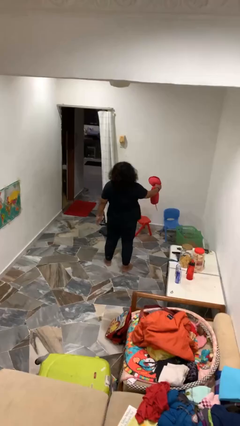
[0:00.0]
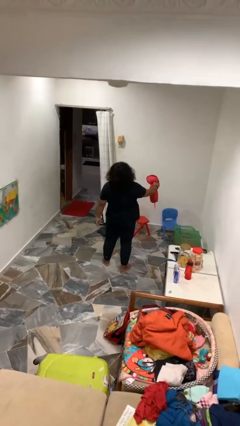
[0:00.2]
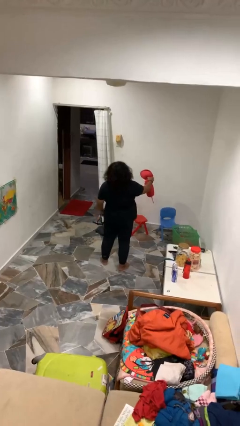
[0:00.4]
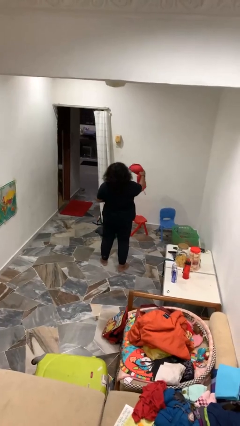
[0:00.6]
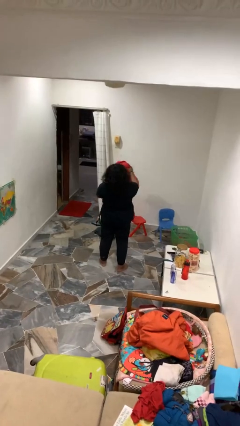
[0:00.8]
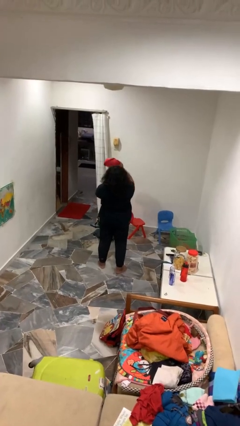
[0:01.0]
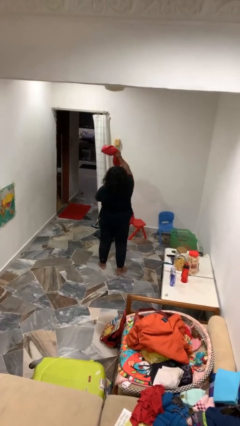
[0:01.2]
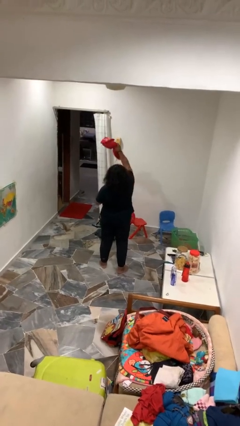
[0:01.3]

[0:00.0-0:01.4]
person catches dropped object

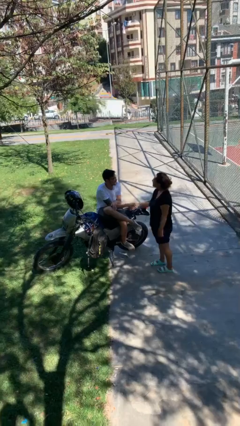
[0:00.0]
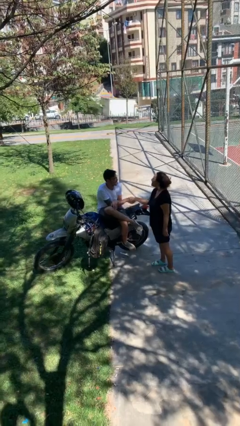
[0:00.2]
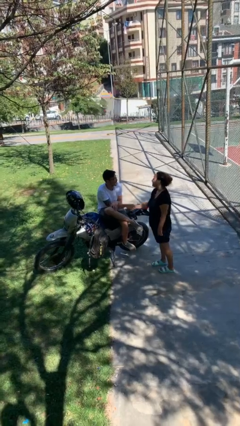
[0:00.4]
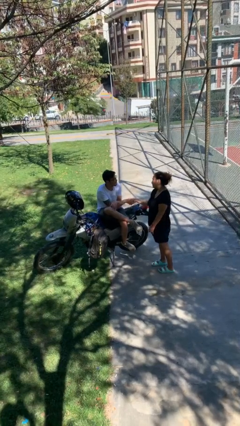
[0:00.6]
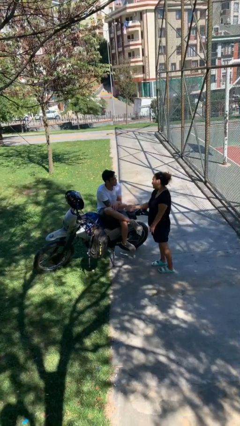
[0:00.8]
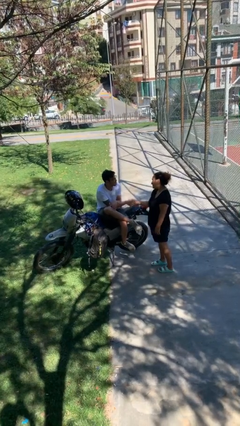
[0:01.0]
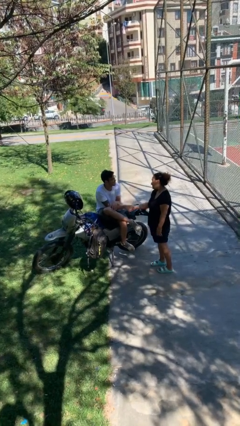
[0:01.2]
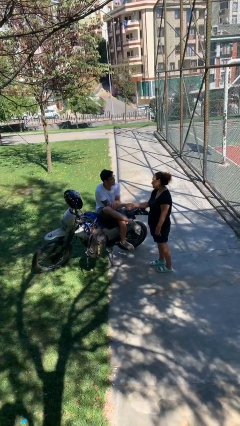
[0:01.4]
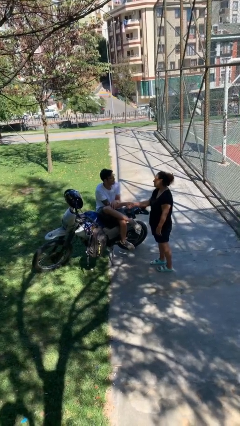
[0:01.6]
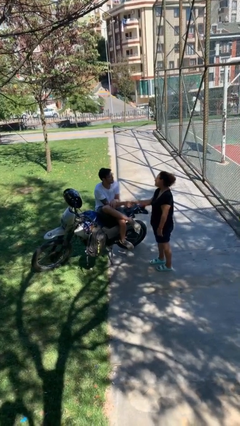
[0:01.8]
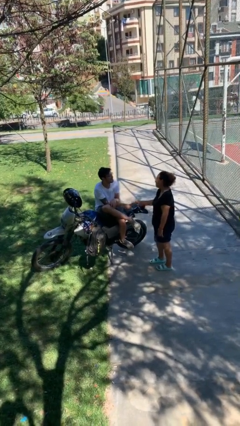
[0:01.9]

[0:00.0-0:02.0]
person shakes hand

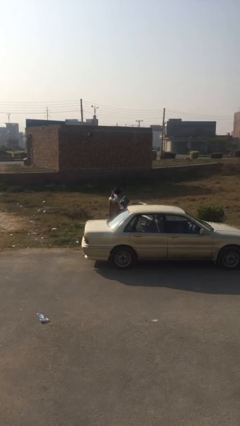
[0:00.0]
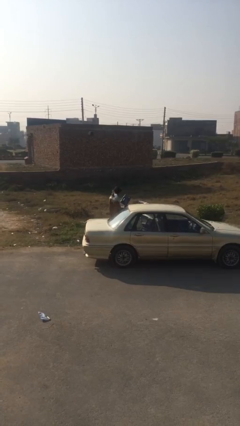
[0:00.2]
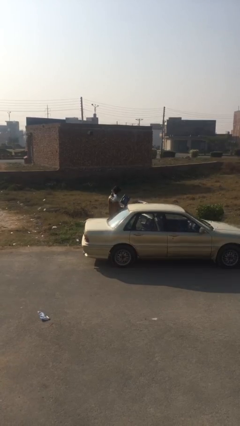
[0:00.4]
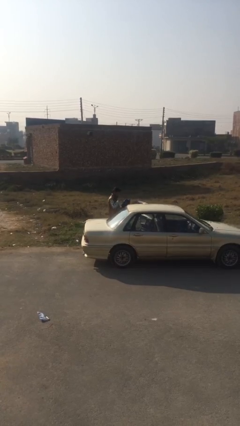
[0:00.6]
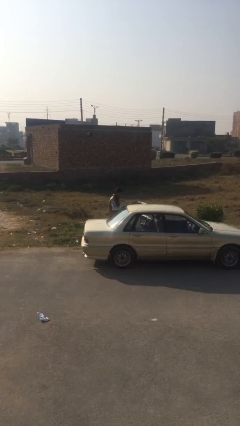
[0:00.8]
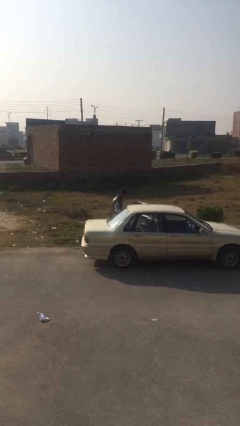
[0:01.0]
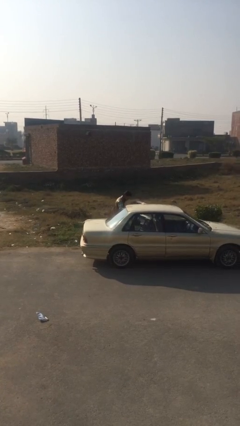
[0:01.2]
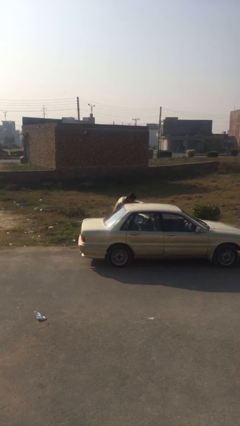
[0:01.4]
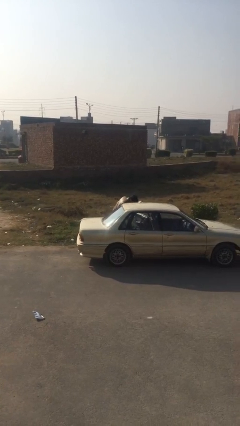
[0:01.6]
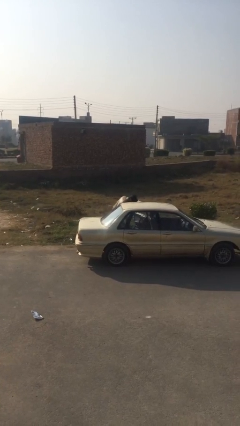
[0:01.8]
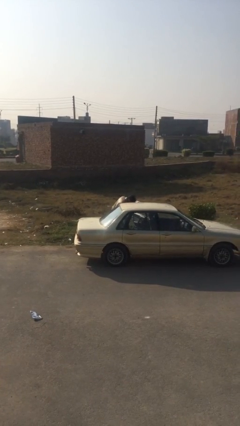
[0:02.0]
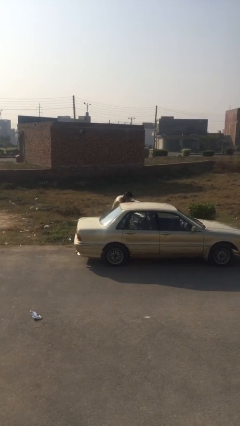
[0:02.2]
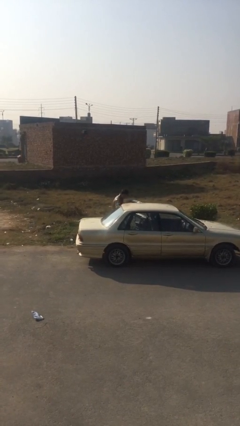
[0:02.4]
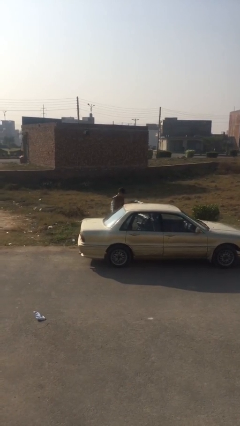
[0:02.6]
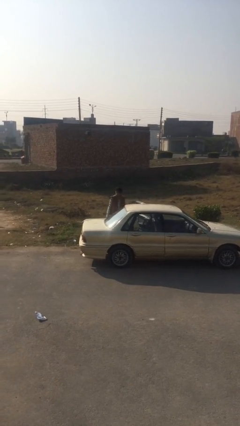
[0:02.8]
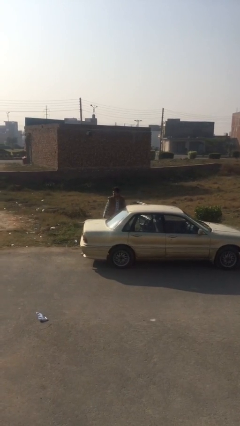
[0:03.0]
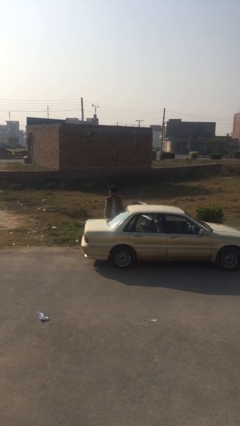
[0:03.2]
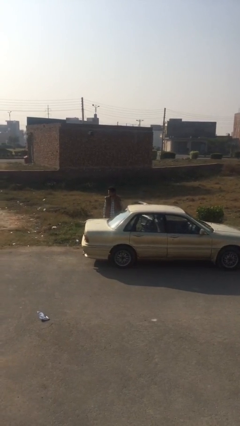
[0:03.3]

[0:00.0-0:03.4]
person loads car

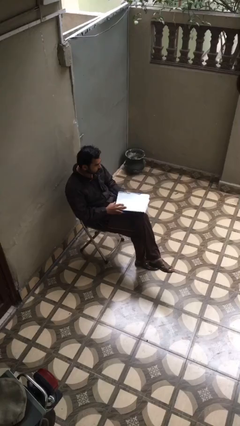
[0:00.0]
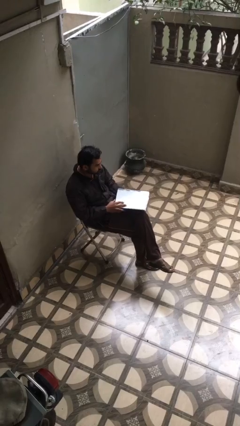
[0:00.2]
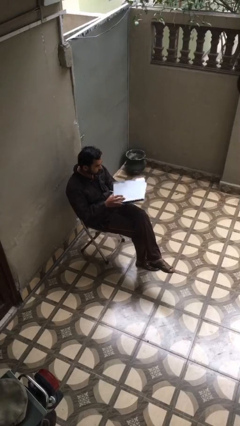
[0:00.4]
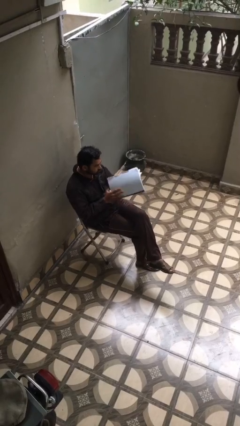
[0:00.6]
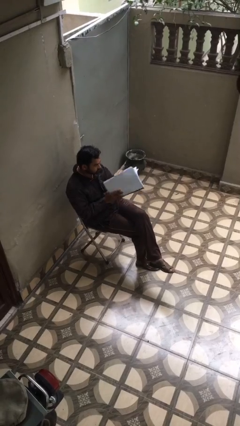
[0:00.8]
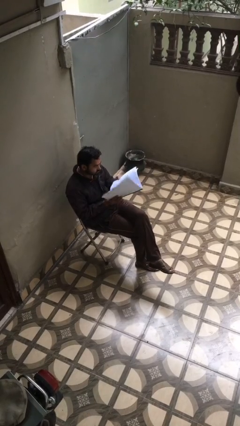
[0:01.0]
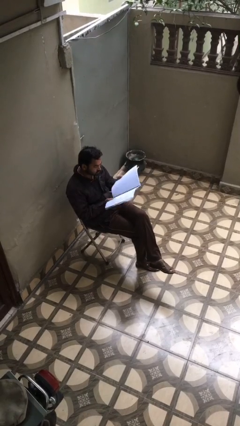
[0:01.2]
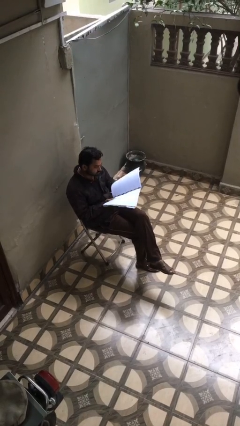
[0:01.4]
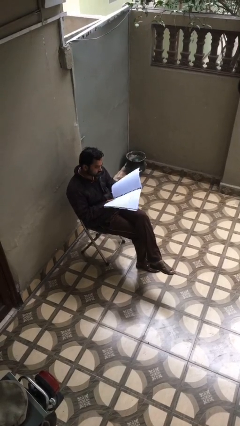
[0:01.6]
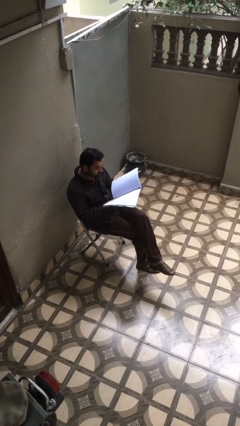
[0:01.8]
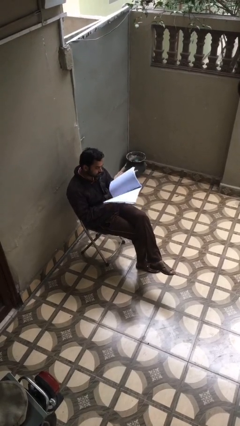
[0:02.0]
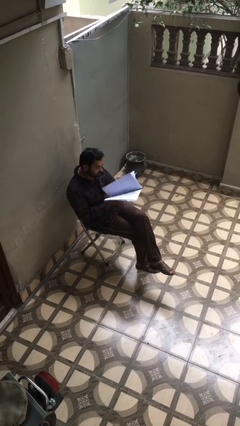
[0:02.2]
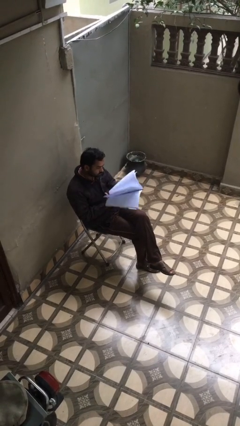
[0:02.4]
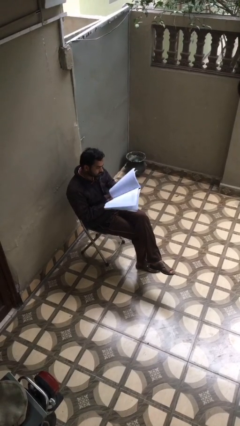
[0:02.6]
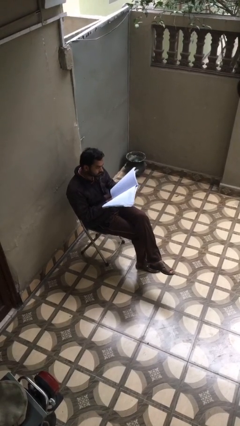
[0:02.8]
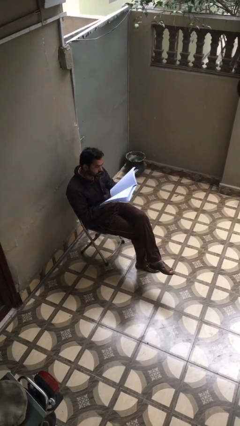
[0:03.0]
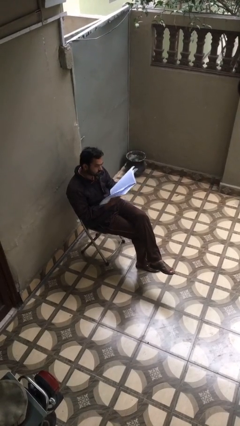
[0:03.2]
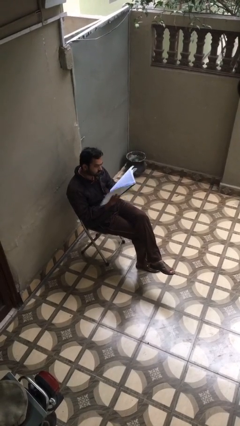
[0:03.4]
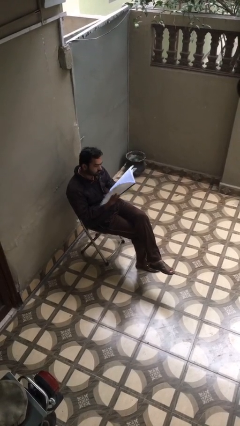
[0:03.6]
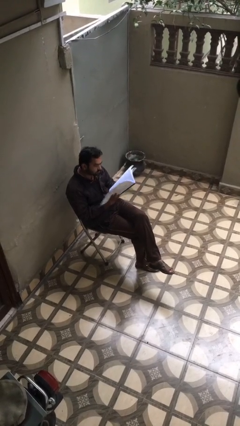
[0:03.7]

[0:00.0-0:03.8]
person reads document

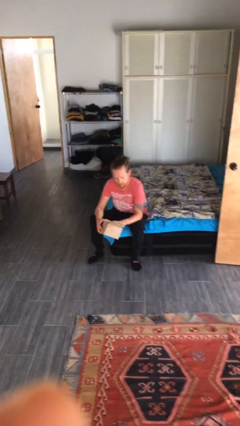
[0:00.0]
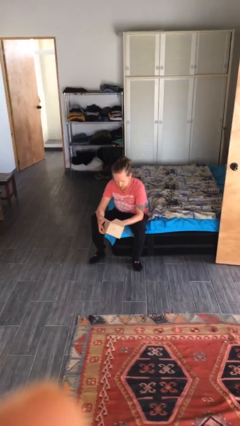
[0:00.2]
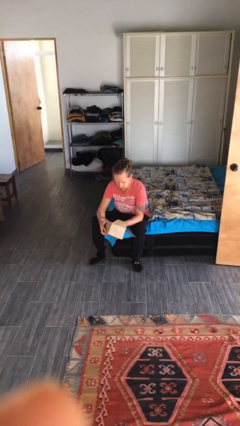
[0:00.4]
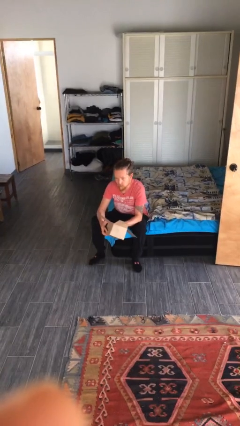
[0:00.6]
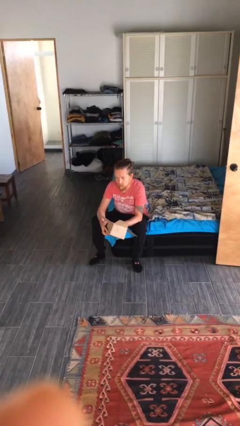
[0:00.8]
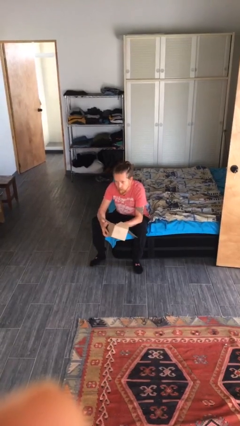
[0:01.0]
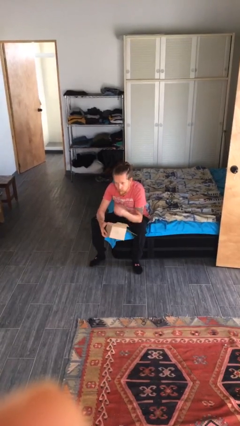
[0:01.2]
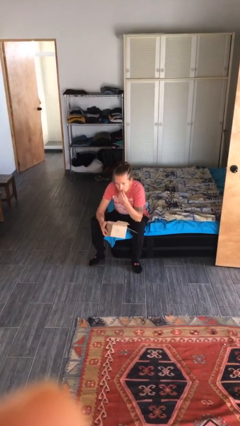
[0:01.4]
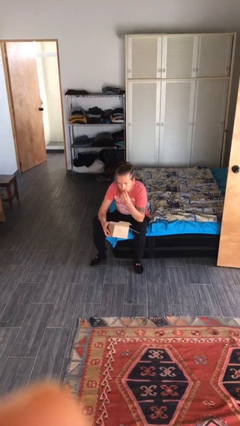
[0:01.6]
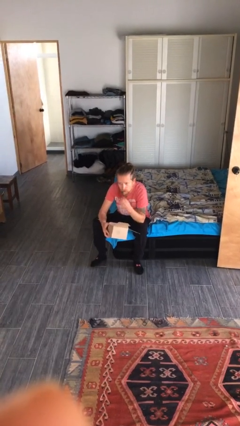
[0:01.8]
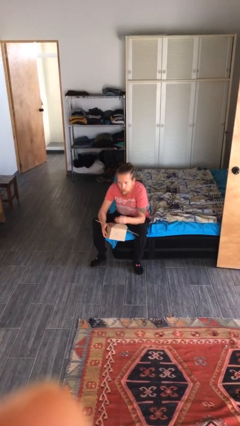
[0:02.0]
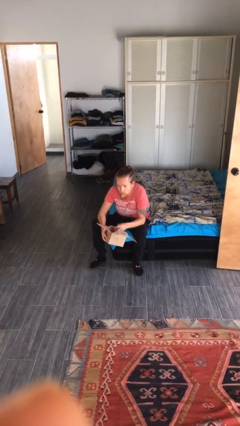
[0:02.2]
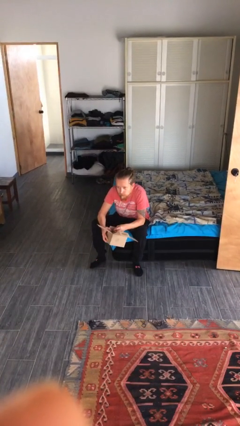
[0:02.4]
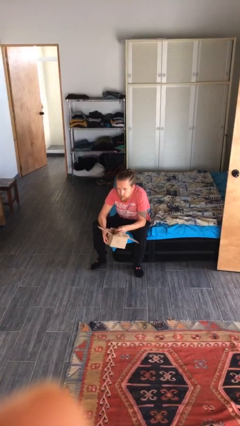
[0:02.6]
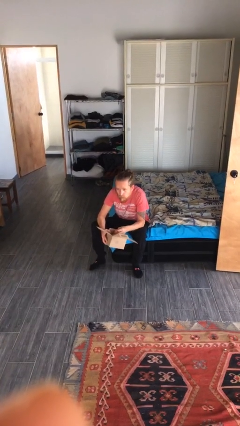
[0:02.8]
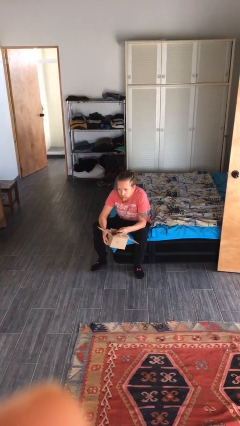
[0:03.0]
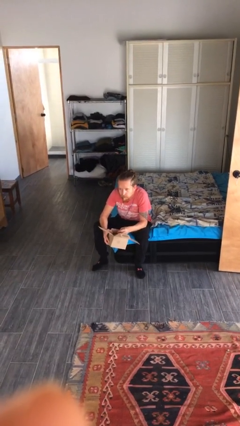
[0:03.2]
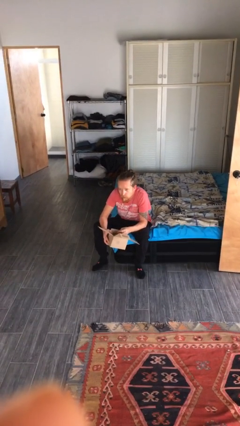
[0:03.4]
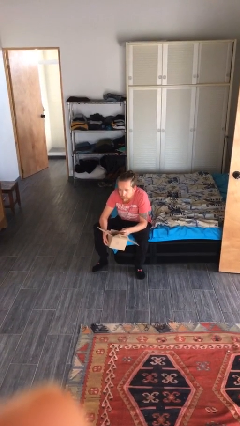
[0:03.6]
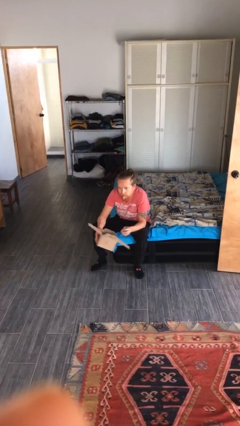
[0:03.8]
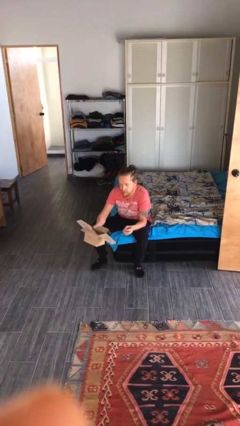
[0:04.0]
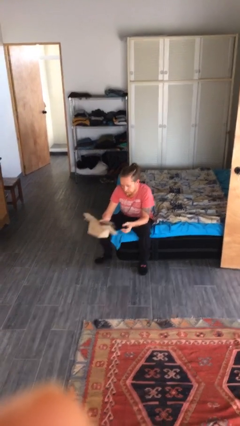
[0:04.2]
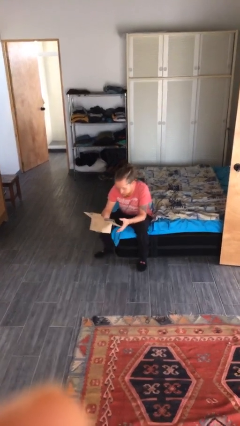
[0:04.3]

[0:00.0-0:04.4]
person eats snack from bag

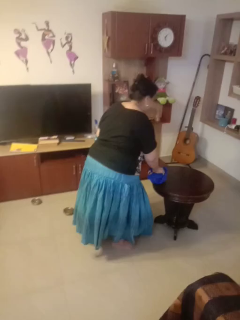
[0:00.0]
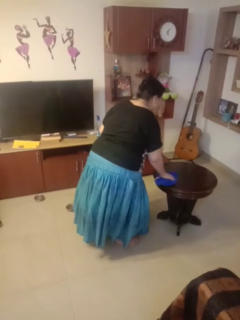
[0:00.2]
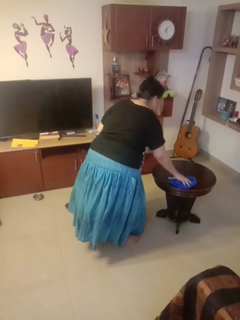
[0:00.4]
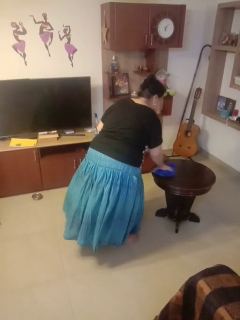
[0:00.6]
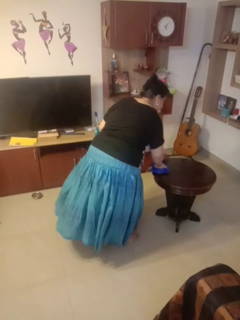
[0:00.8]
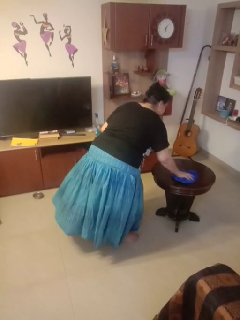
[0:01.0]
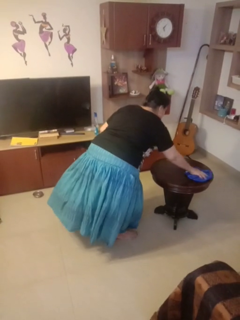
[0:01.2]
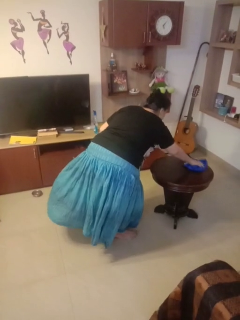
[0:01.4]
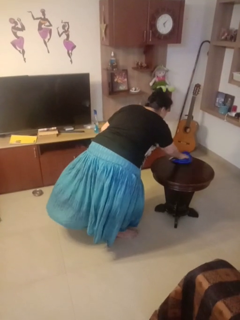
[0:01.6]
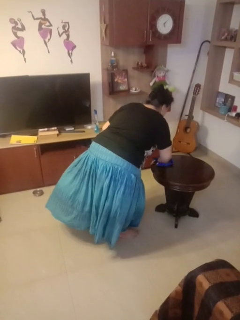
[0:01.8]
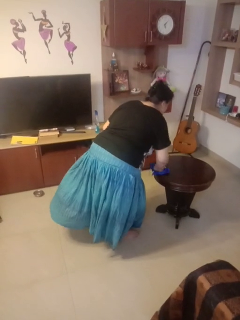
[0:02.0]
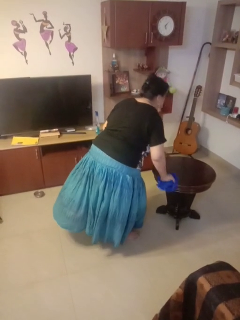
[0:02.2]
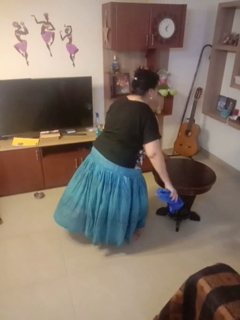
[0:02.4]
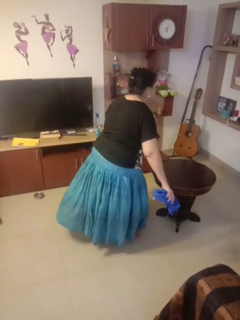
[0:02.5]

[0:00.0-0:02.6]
person cleans table with rag
